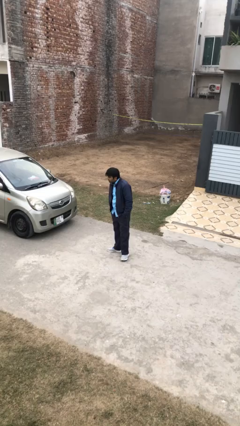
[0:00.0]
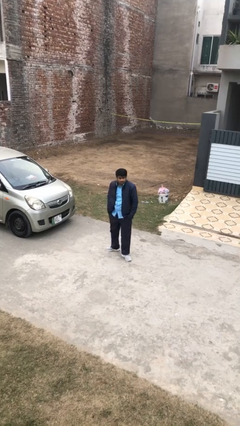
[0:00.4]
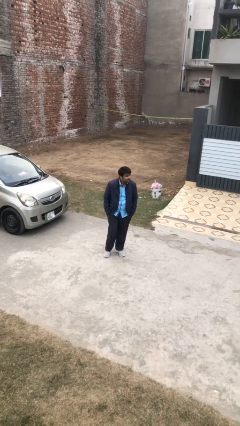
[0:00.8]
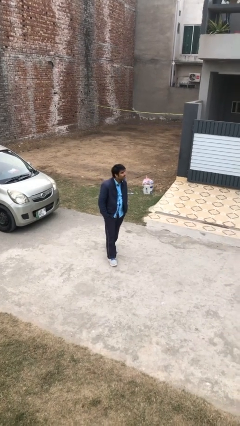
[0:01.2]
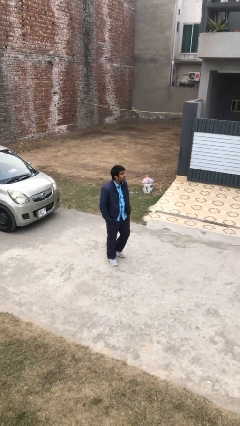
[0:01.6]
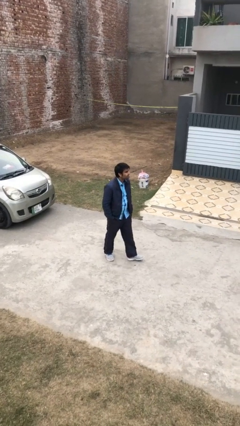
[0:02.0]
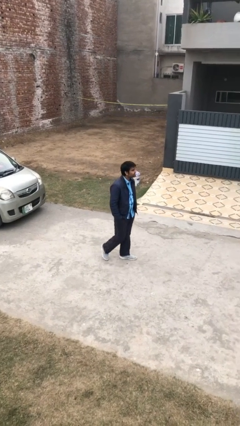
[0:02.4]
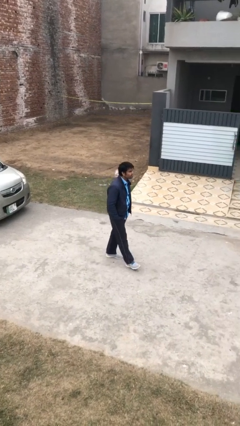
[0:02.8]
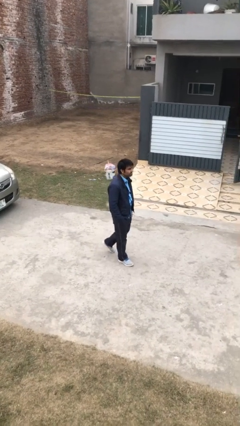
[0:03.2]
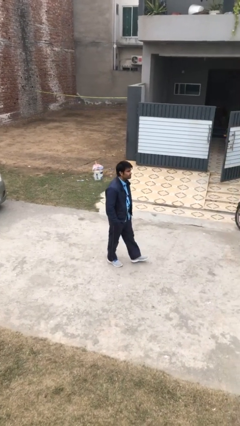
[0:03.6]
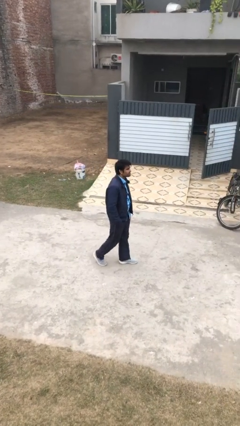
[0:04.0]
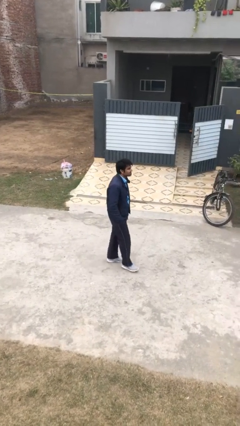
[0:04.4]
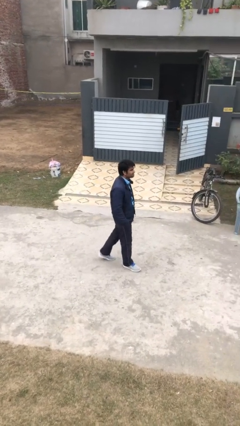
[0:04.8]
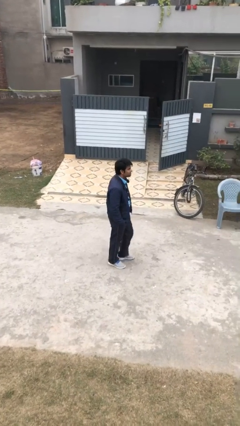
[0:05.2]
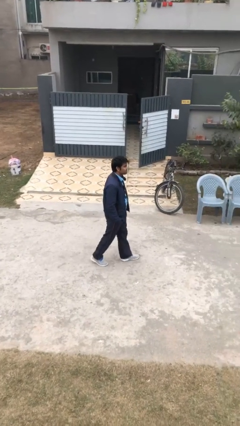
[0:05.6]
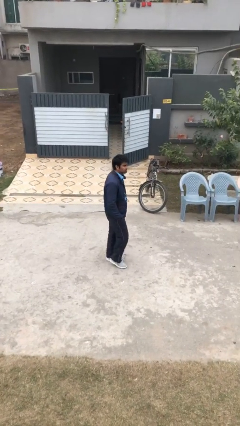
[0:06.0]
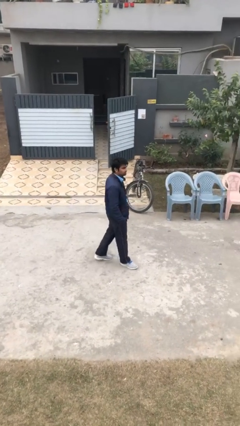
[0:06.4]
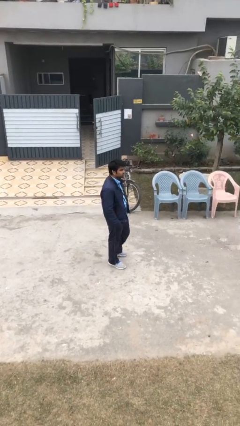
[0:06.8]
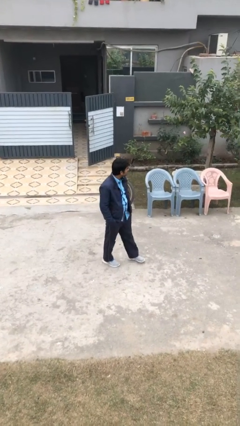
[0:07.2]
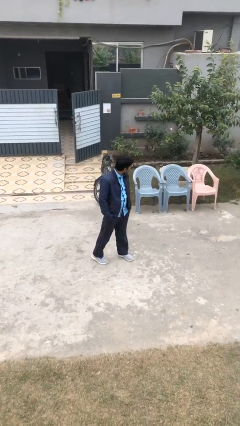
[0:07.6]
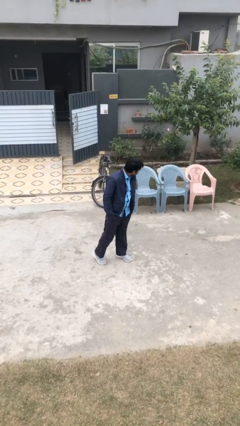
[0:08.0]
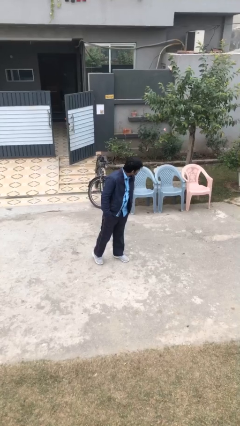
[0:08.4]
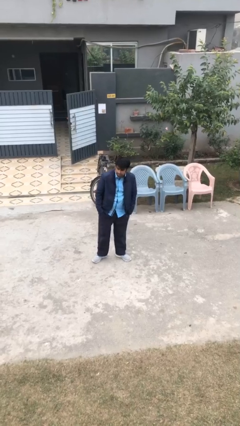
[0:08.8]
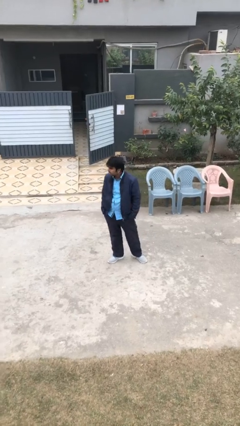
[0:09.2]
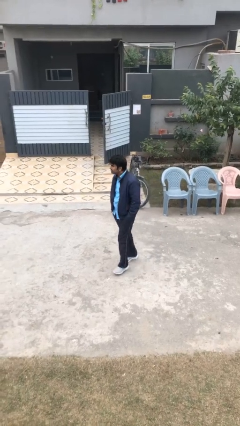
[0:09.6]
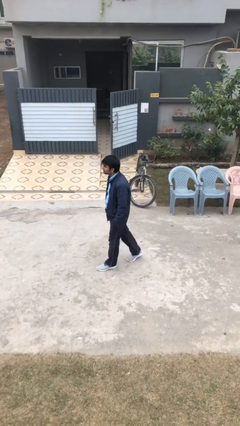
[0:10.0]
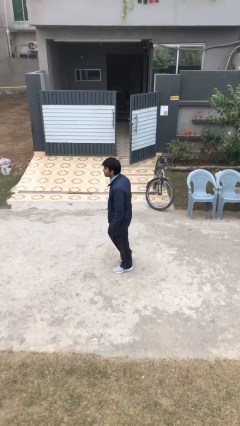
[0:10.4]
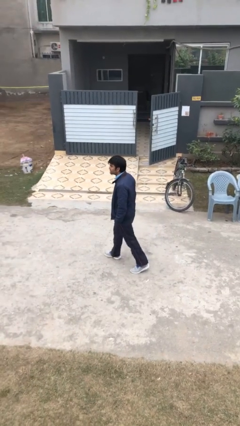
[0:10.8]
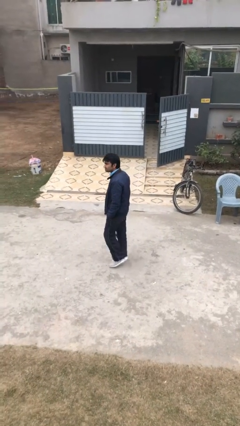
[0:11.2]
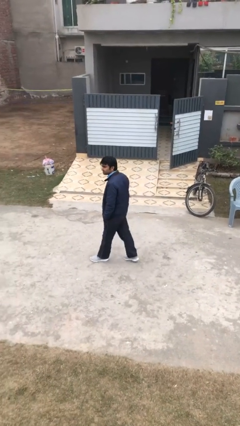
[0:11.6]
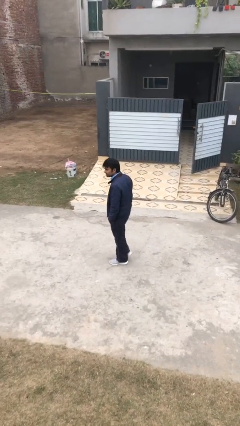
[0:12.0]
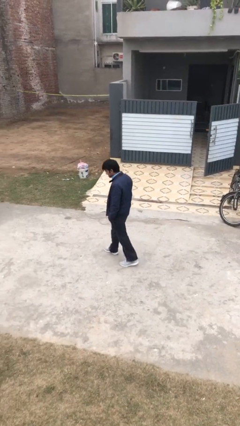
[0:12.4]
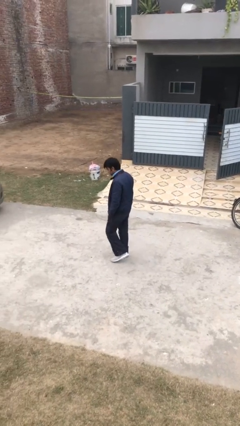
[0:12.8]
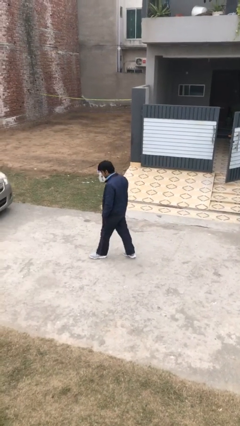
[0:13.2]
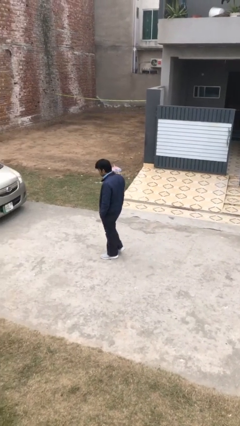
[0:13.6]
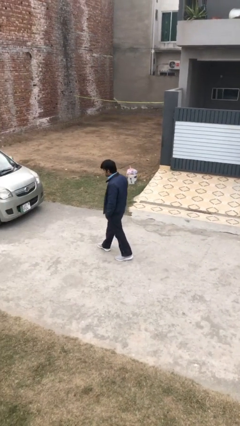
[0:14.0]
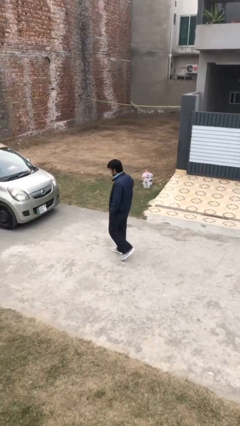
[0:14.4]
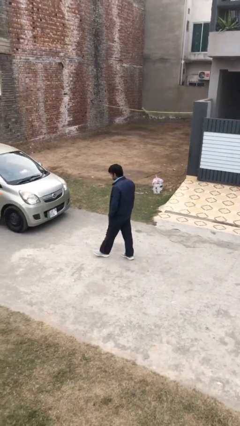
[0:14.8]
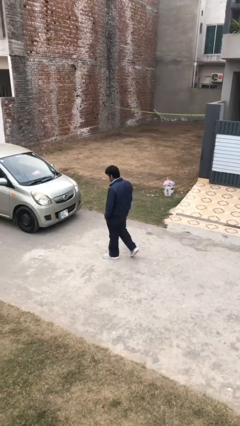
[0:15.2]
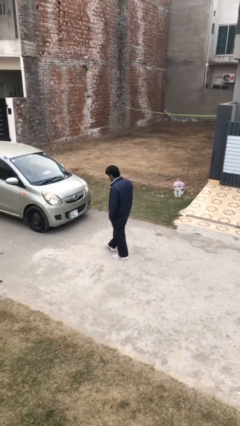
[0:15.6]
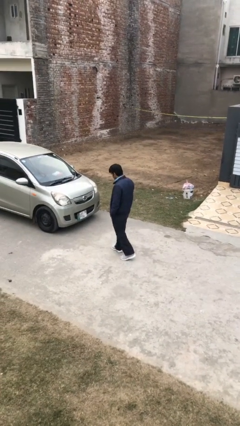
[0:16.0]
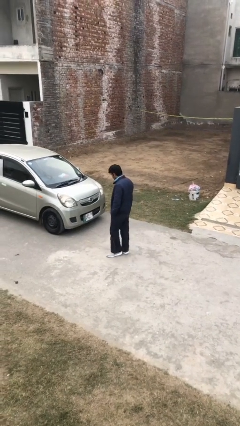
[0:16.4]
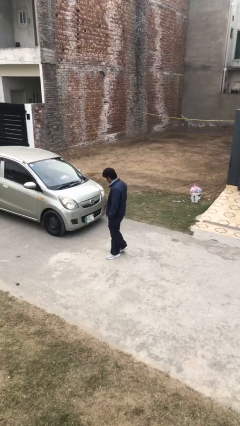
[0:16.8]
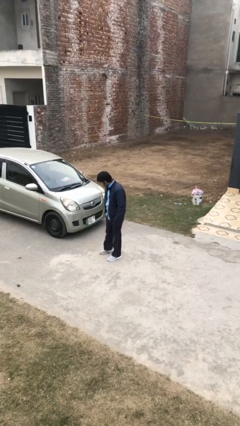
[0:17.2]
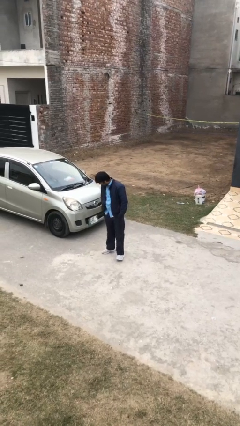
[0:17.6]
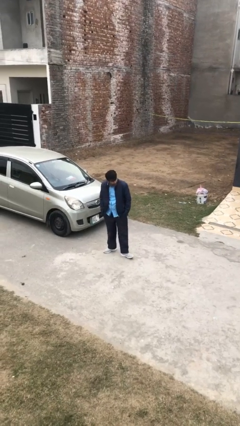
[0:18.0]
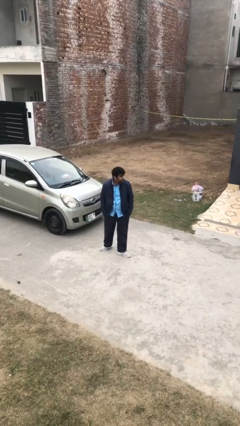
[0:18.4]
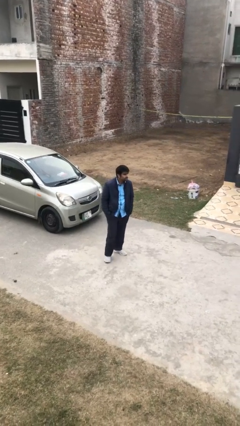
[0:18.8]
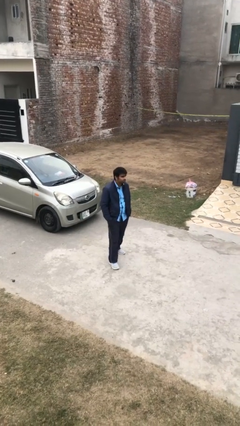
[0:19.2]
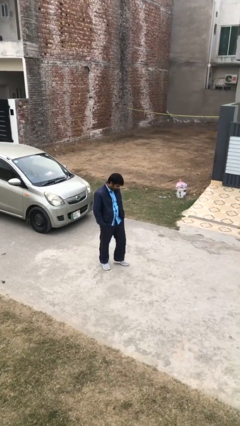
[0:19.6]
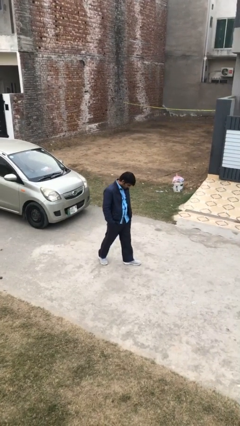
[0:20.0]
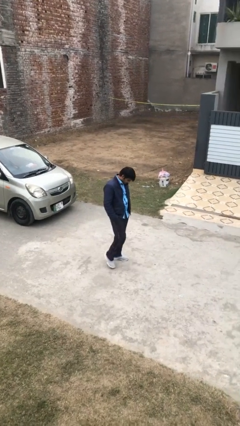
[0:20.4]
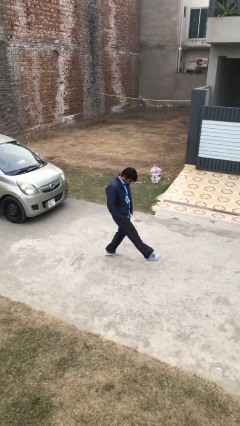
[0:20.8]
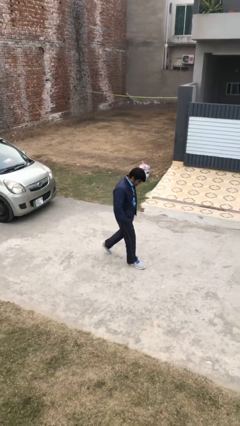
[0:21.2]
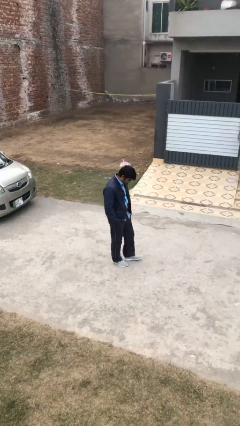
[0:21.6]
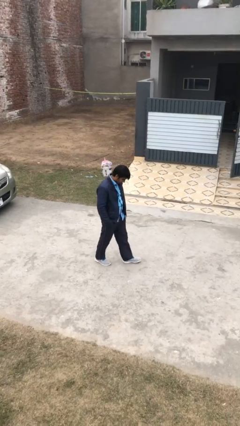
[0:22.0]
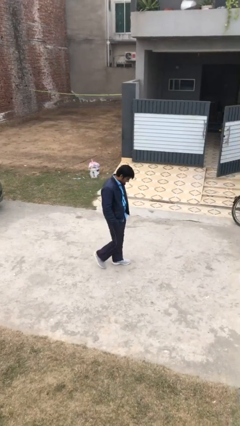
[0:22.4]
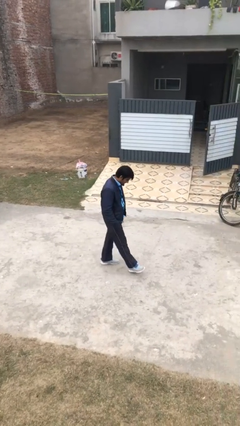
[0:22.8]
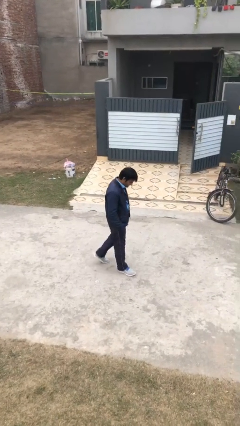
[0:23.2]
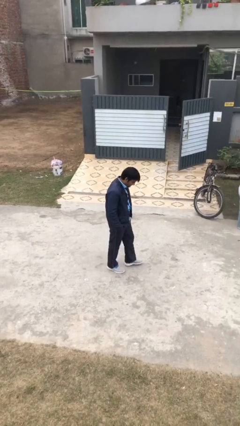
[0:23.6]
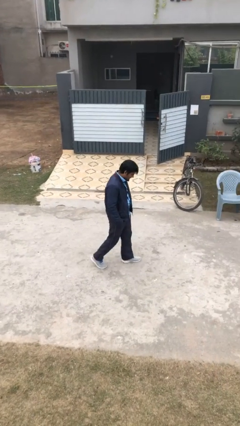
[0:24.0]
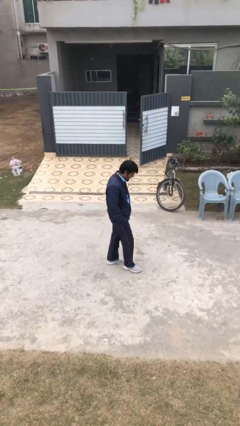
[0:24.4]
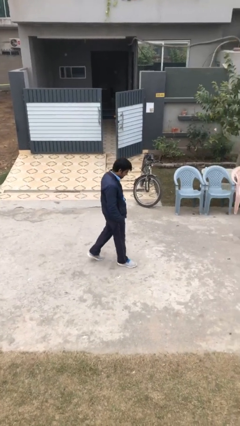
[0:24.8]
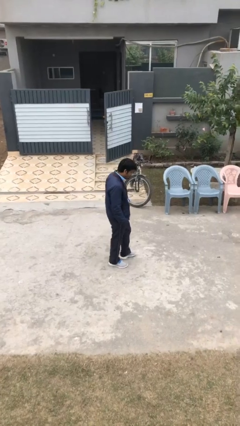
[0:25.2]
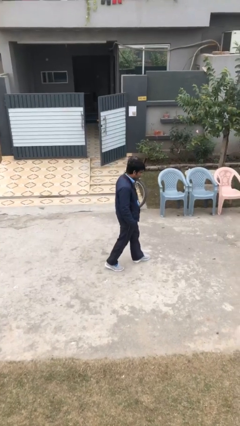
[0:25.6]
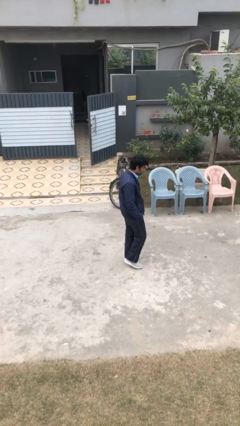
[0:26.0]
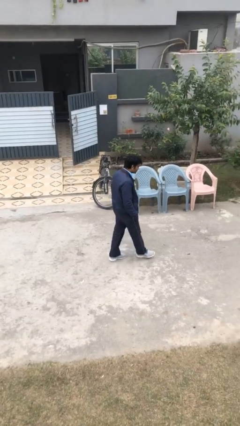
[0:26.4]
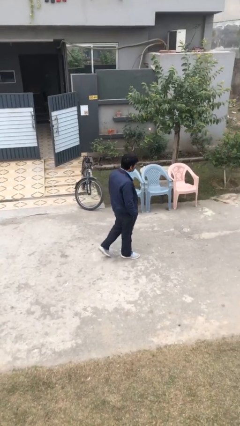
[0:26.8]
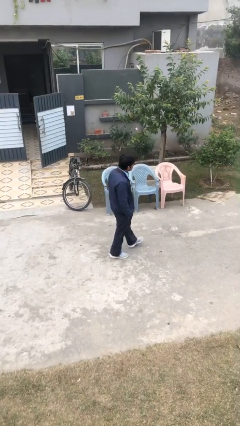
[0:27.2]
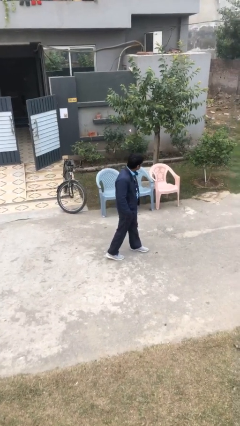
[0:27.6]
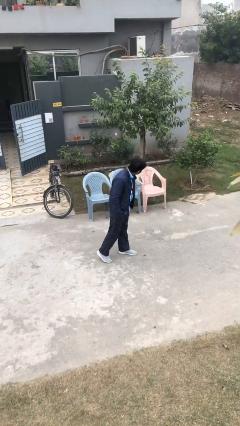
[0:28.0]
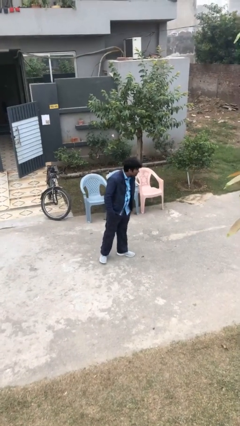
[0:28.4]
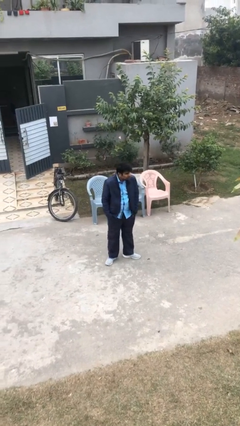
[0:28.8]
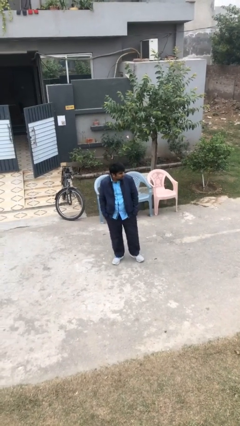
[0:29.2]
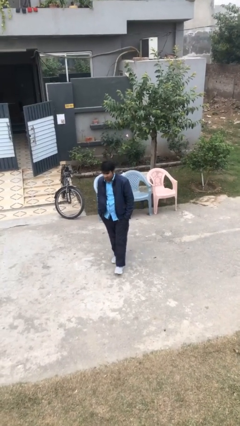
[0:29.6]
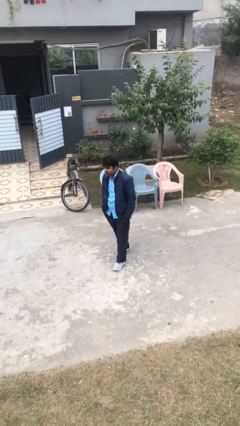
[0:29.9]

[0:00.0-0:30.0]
person walks

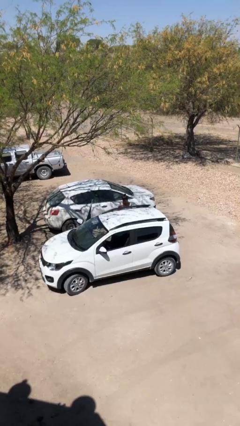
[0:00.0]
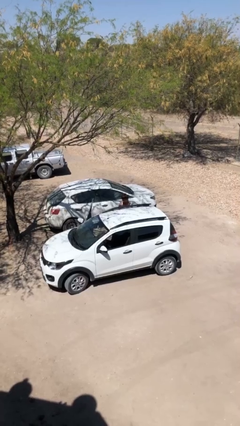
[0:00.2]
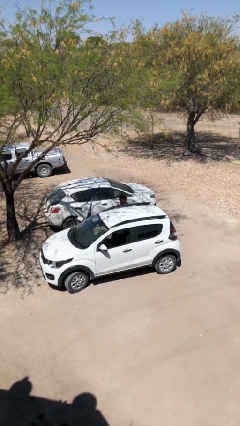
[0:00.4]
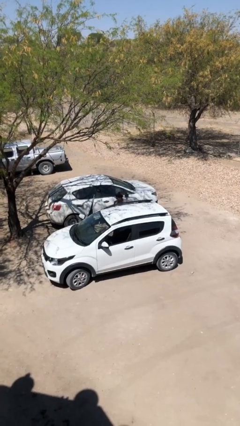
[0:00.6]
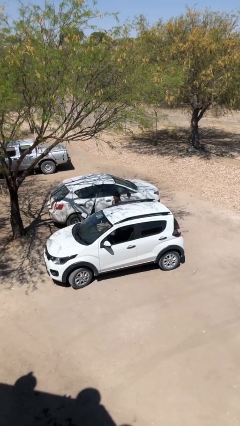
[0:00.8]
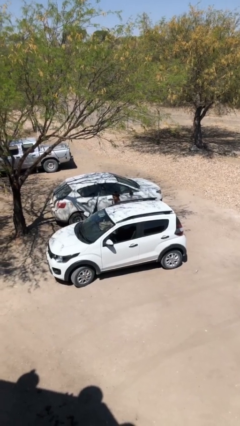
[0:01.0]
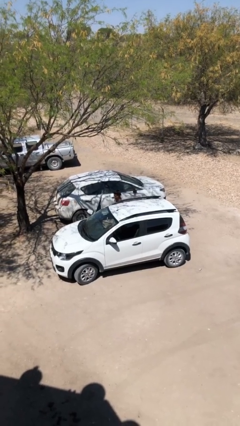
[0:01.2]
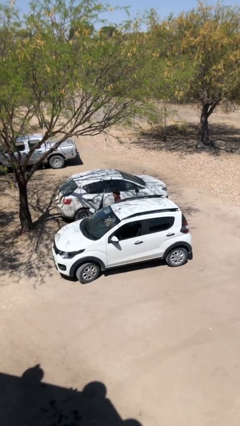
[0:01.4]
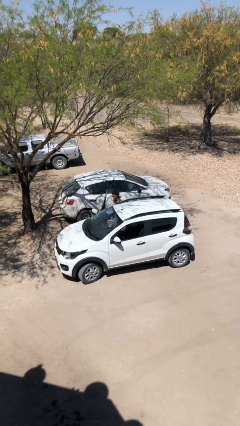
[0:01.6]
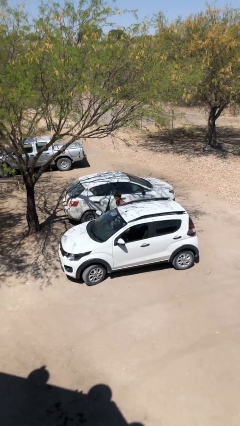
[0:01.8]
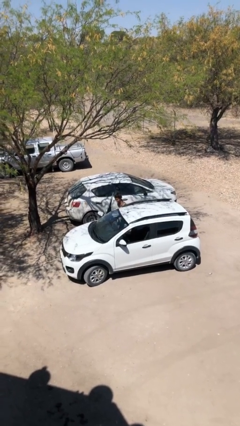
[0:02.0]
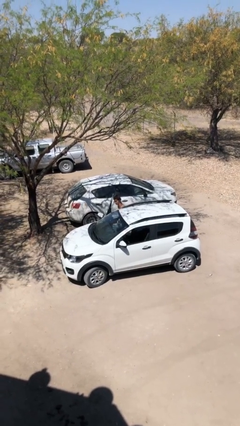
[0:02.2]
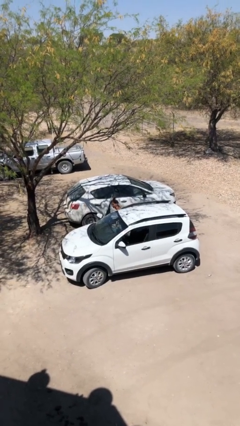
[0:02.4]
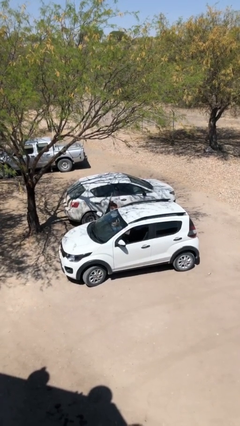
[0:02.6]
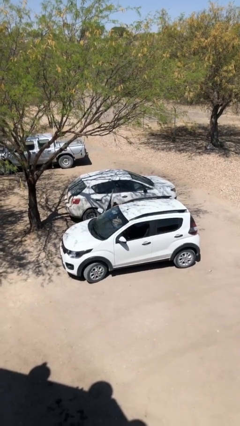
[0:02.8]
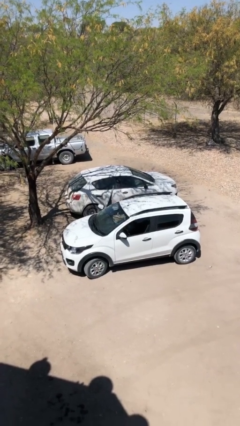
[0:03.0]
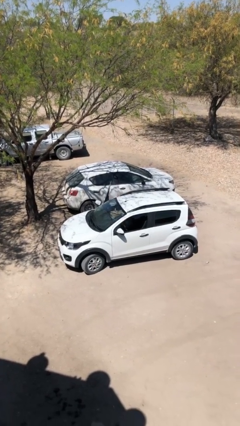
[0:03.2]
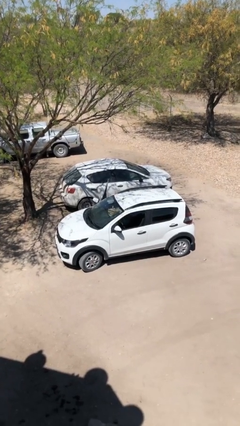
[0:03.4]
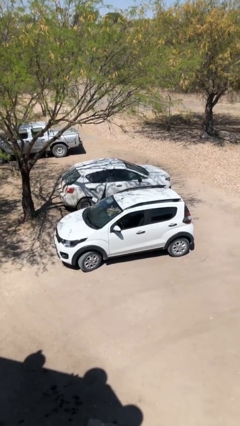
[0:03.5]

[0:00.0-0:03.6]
person enters car
